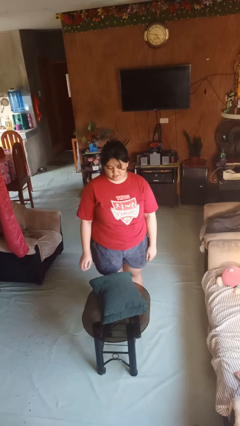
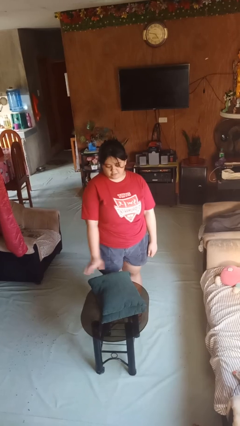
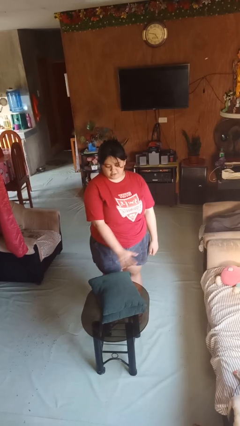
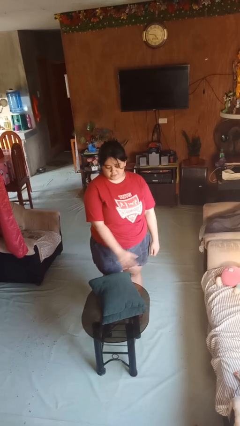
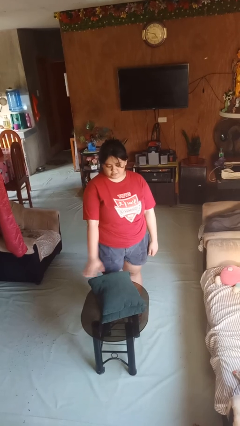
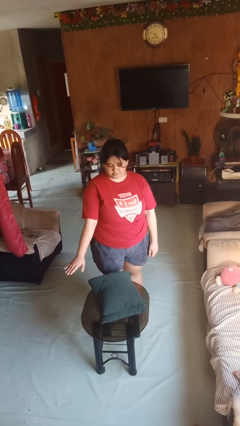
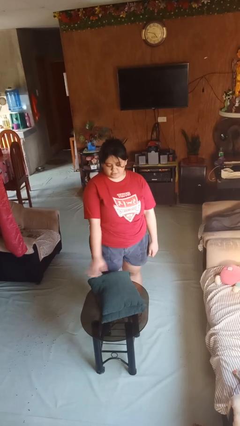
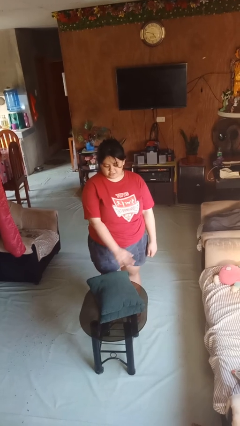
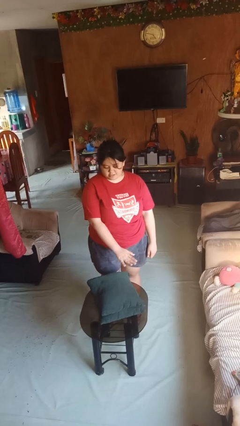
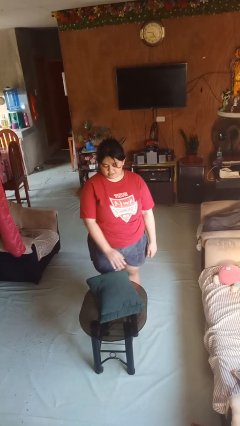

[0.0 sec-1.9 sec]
person waves hand over object

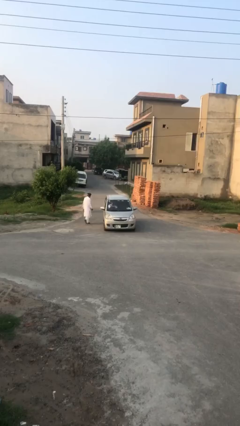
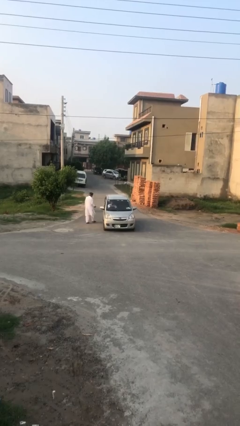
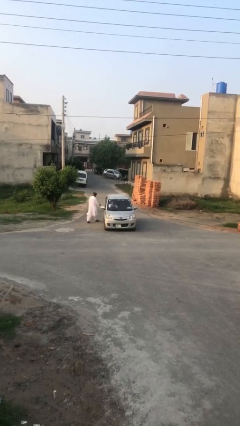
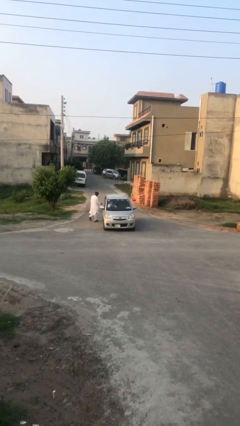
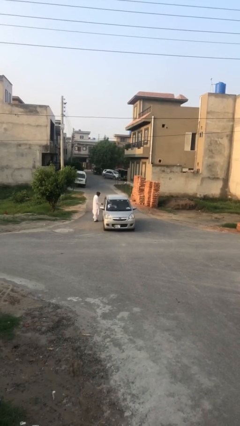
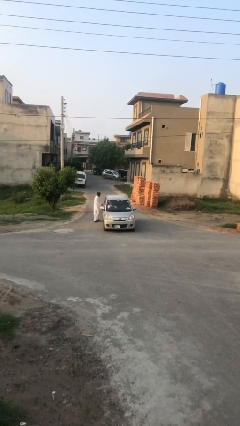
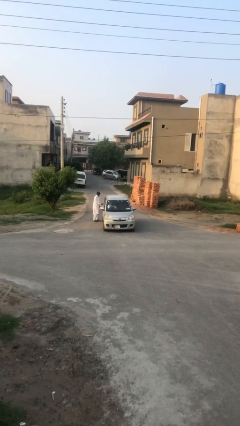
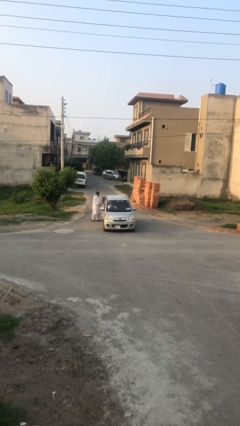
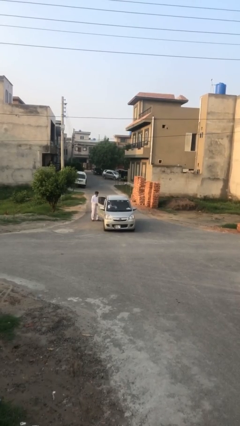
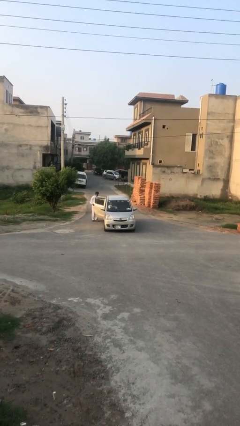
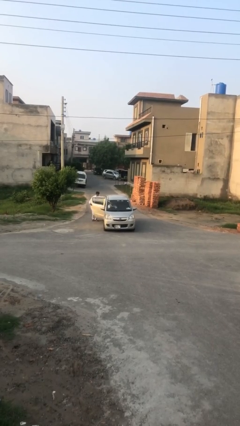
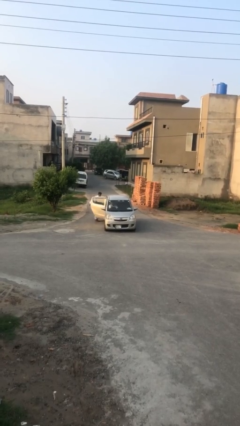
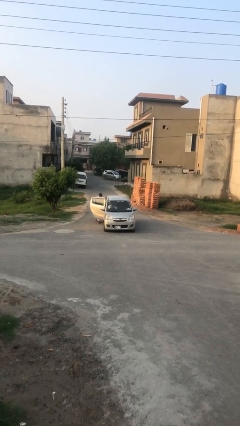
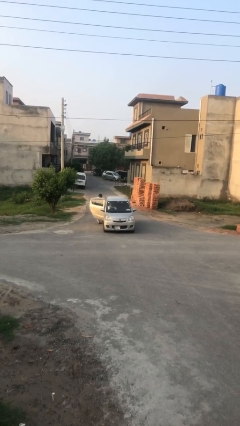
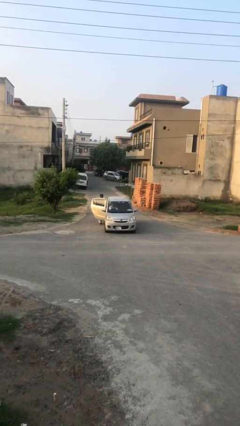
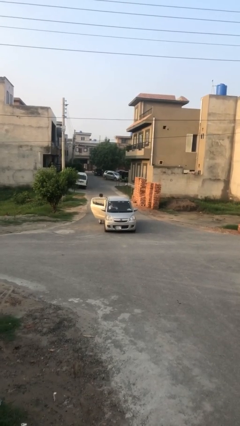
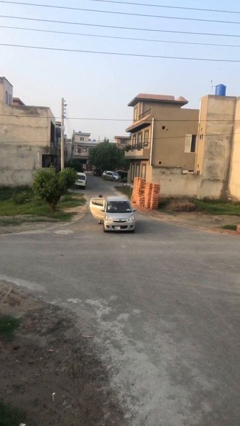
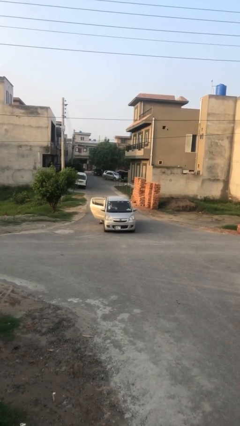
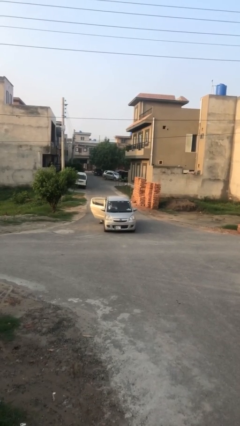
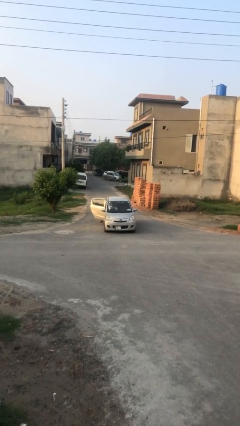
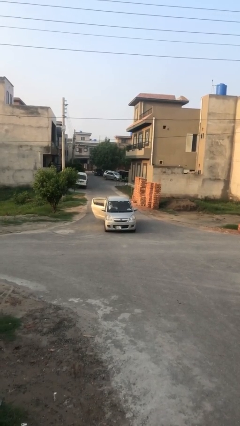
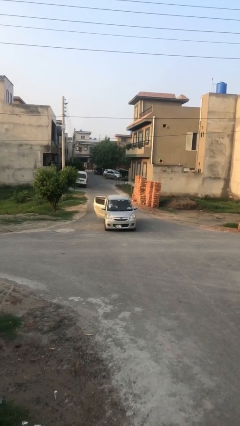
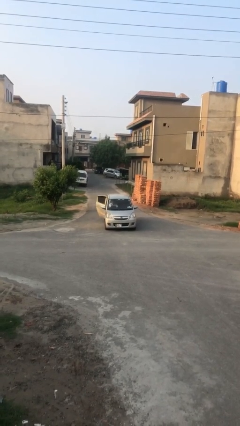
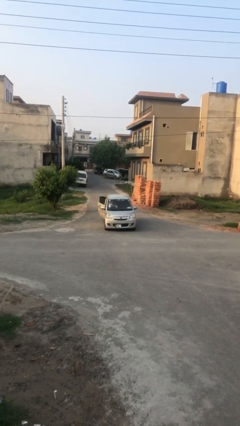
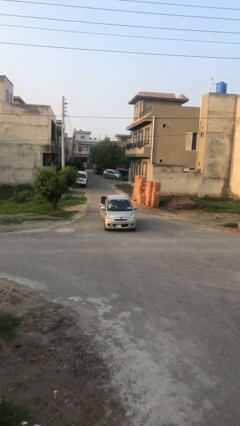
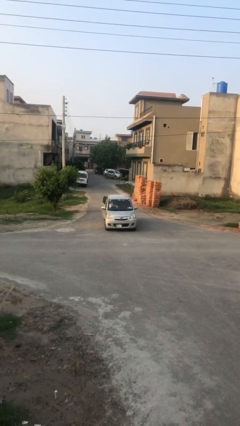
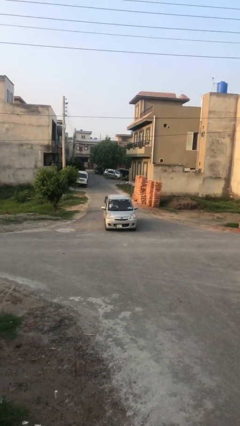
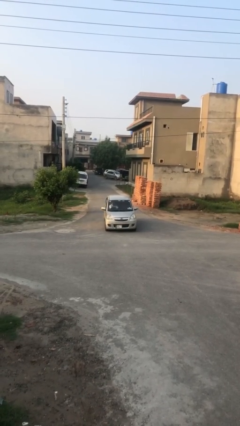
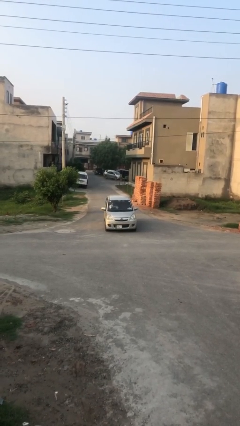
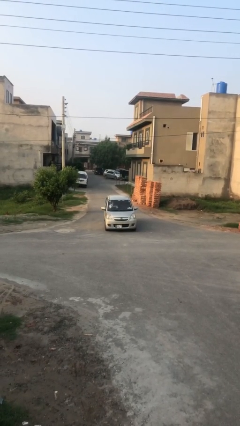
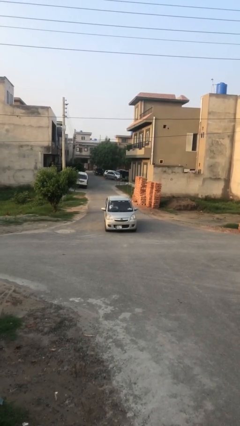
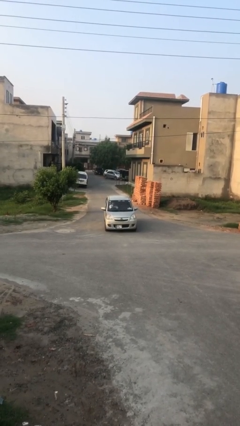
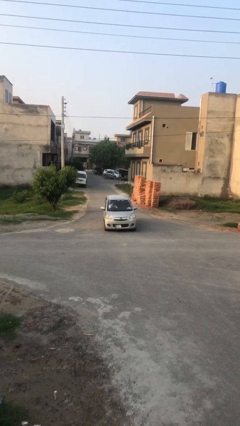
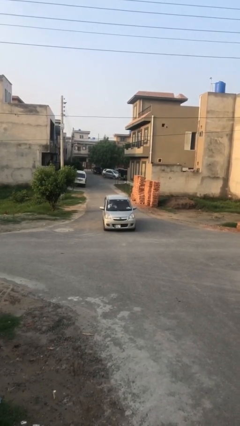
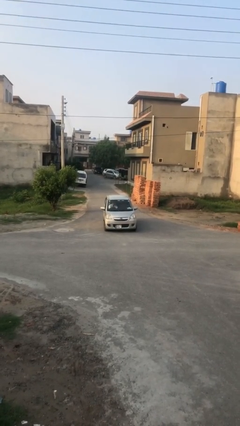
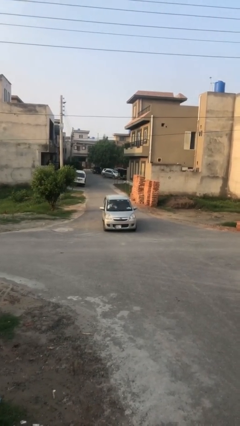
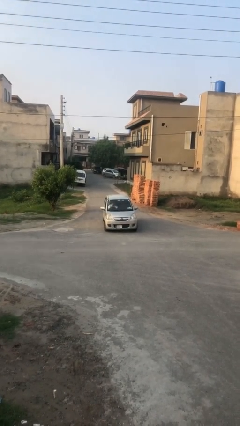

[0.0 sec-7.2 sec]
car picks up person

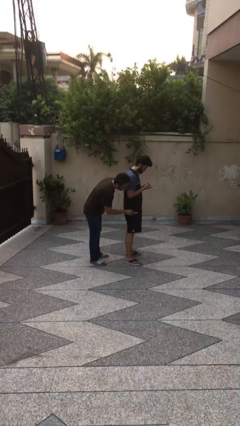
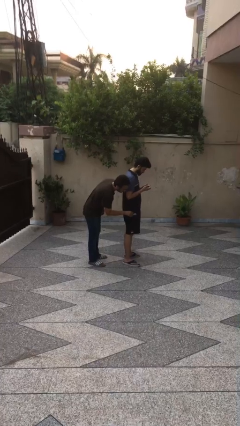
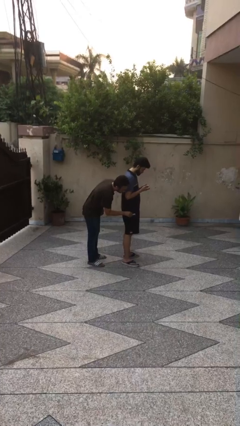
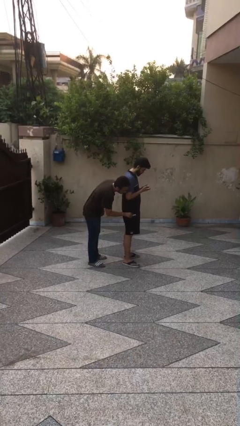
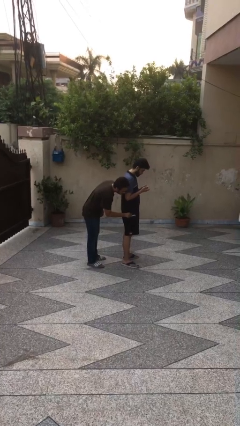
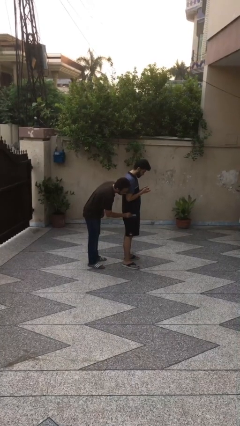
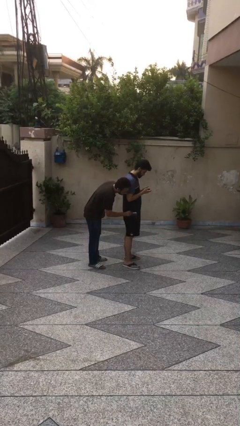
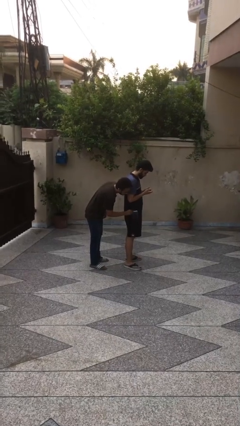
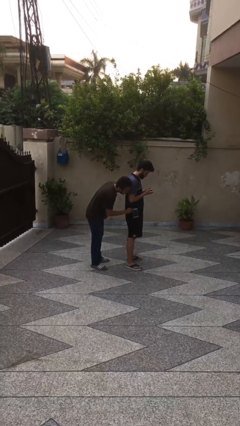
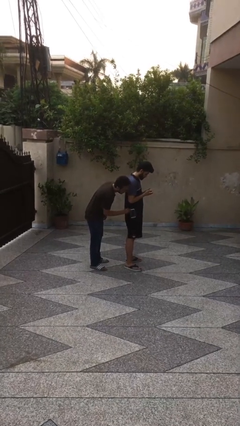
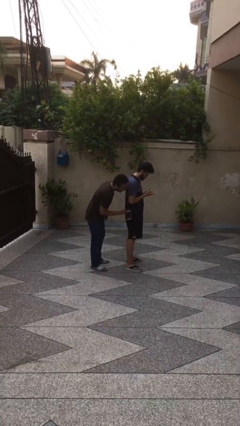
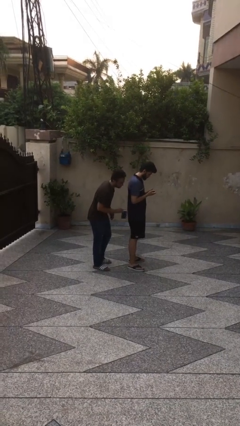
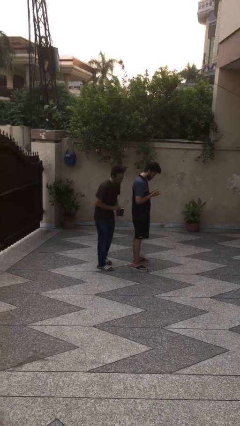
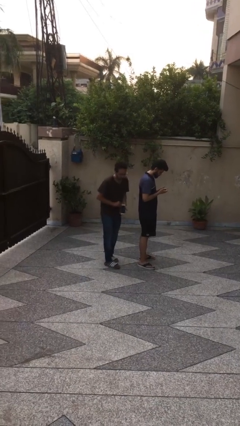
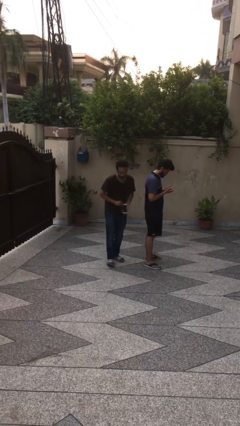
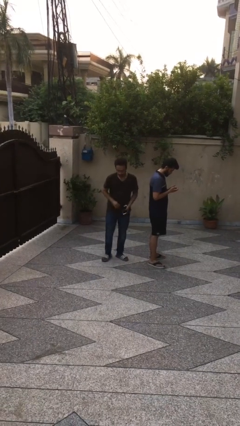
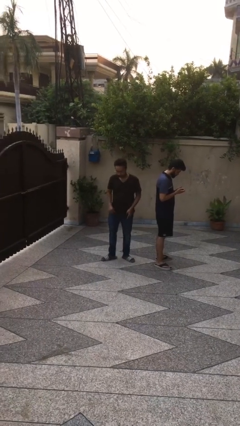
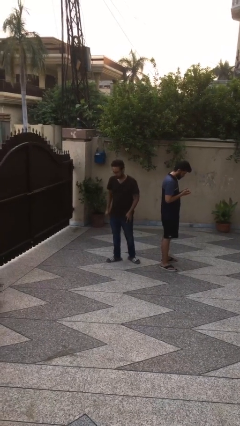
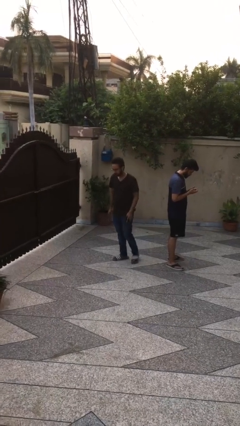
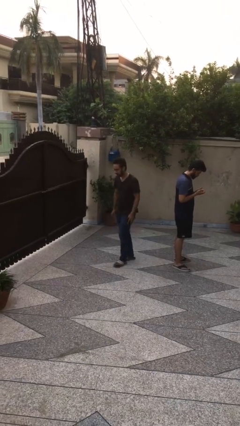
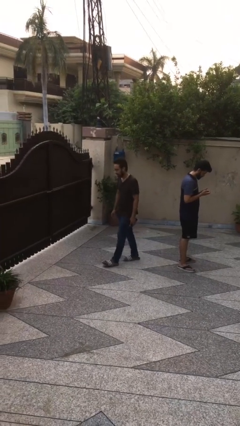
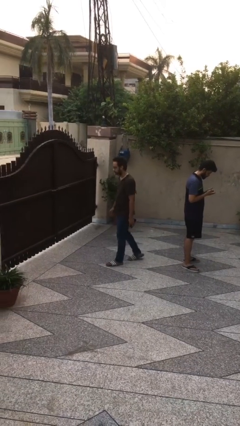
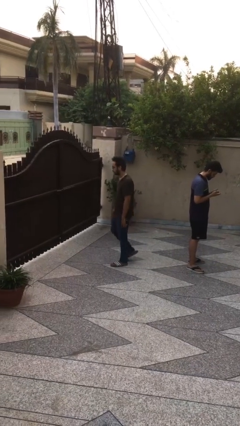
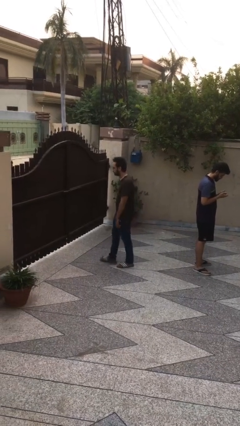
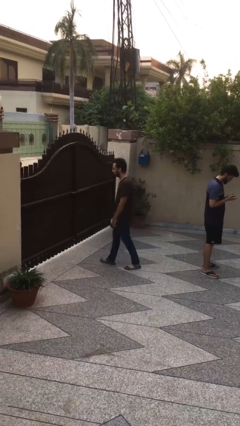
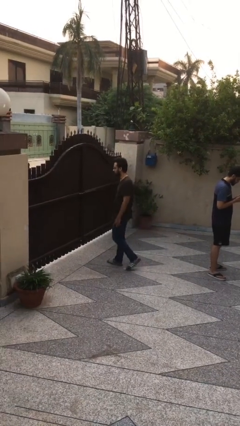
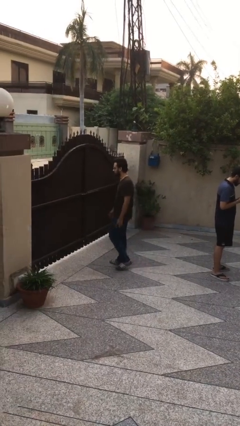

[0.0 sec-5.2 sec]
person steals object from person

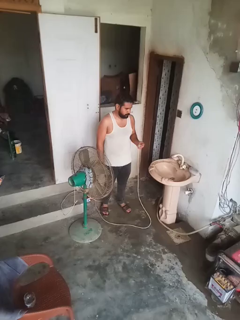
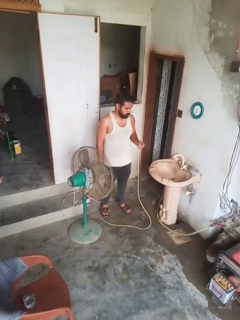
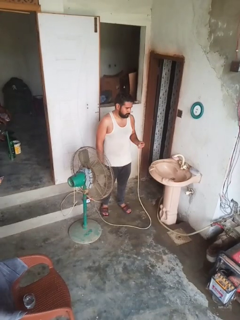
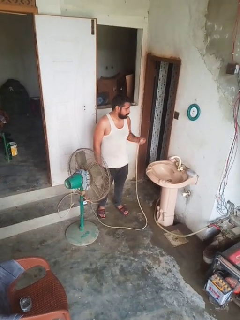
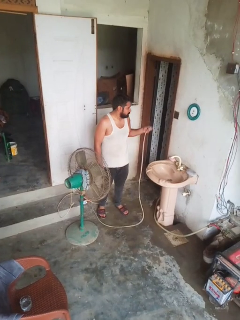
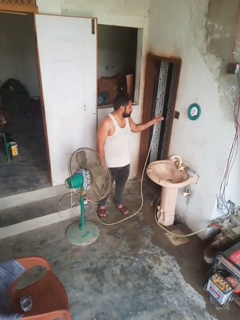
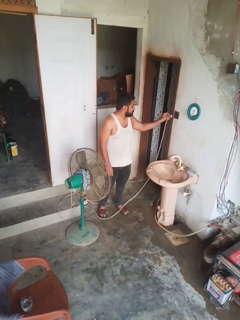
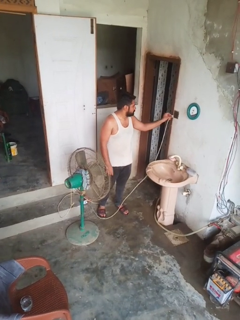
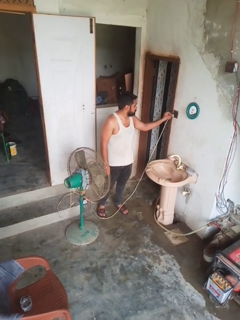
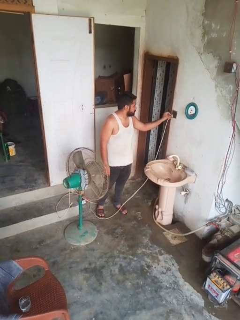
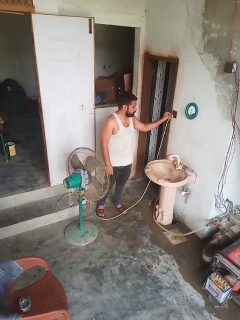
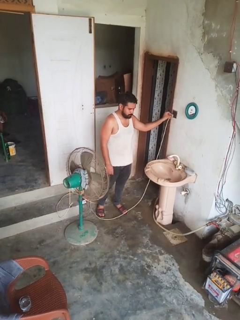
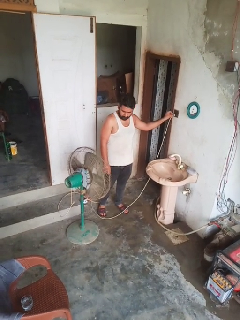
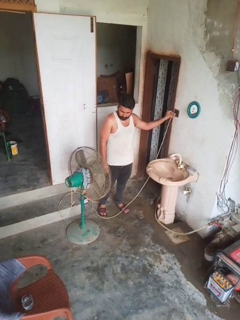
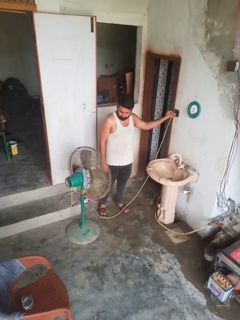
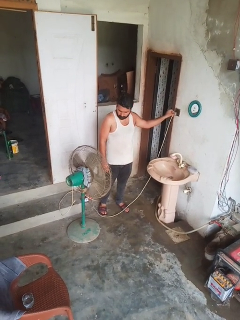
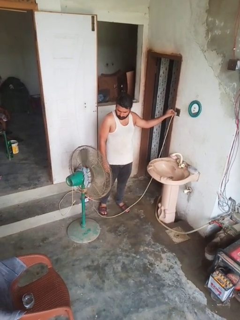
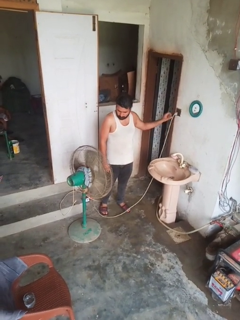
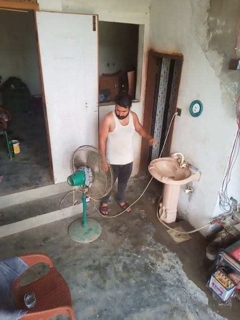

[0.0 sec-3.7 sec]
person turns on fan

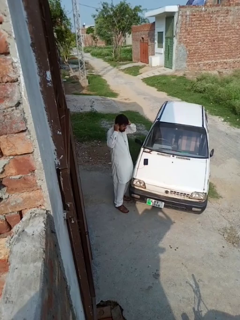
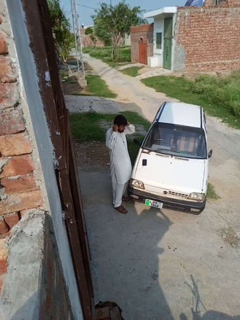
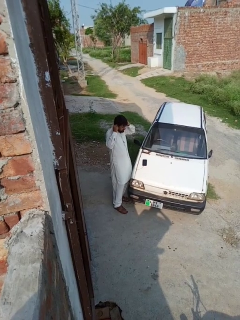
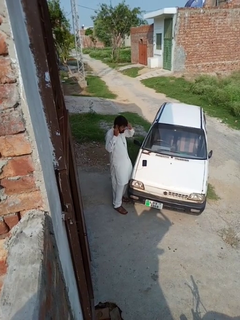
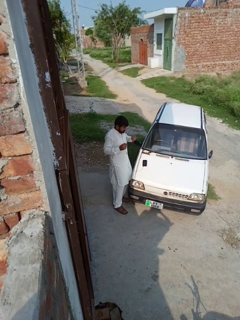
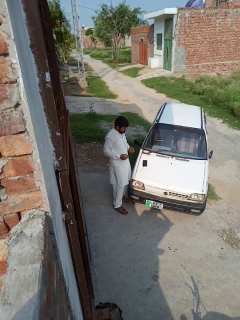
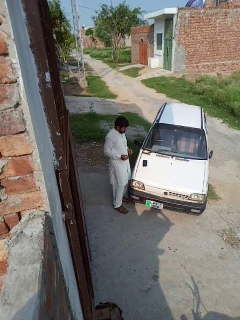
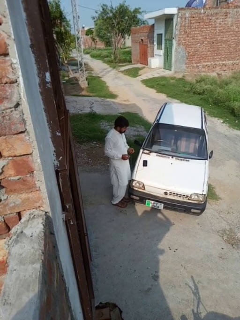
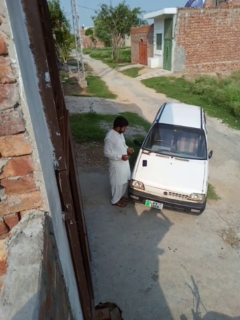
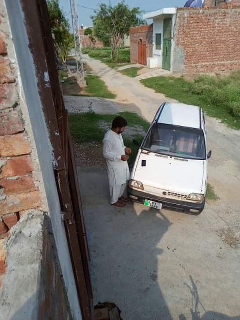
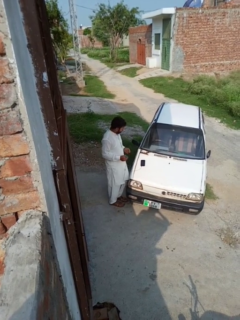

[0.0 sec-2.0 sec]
person takes off headphones
